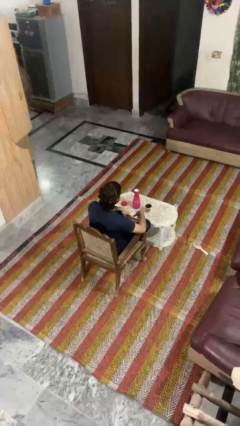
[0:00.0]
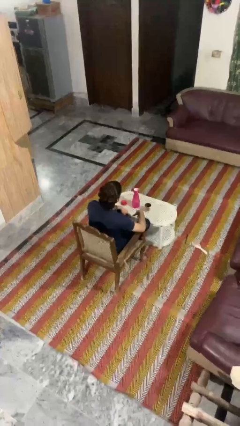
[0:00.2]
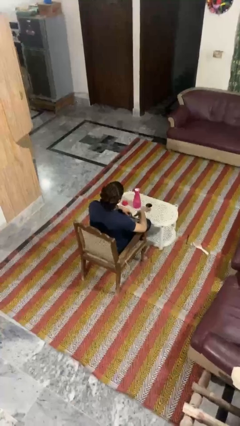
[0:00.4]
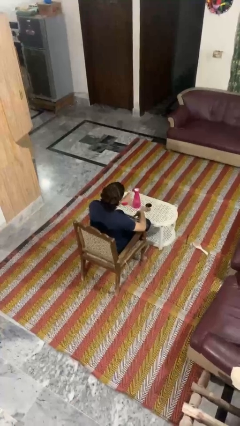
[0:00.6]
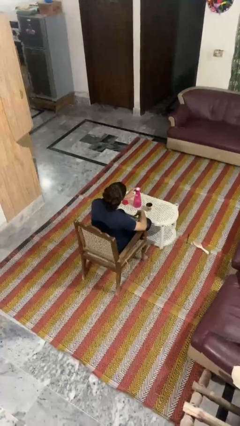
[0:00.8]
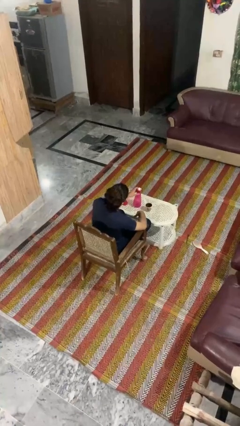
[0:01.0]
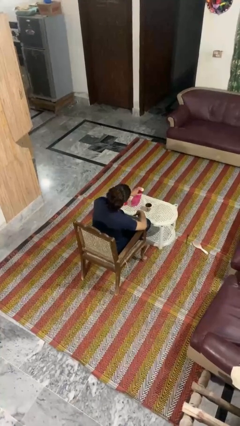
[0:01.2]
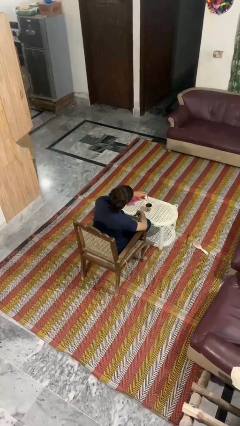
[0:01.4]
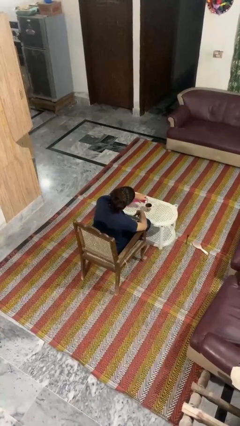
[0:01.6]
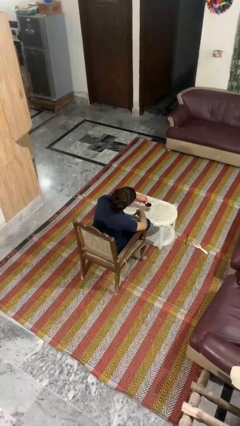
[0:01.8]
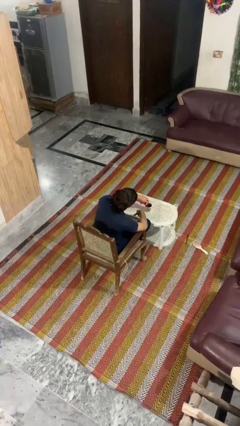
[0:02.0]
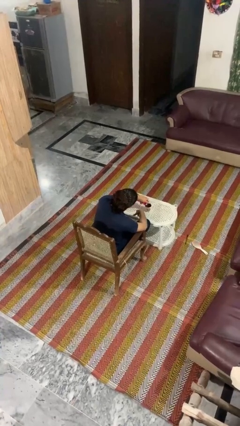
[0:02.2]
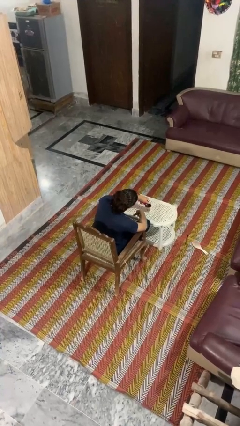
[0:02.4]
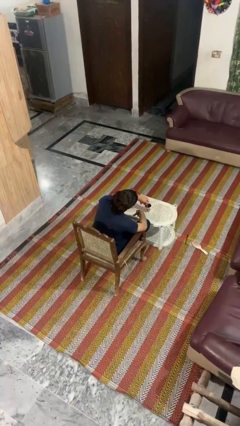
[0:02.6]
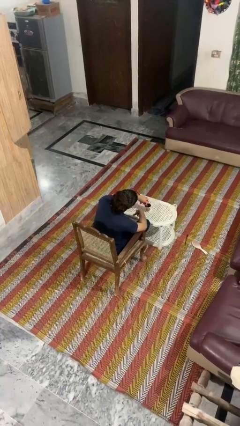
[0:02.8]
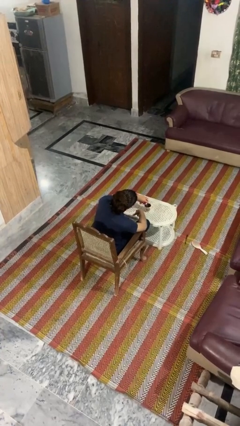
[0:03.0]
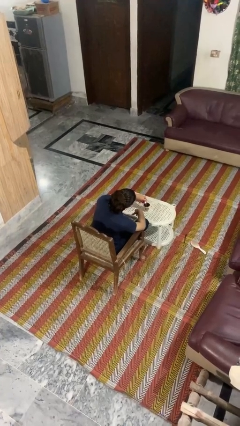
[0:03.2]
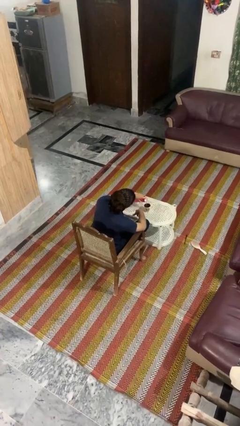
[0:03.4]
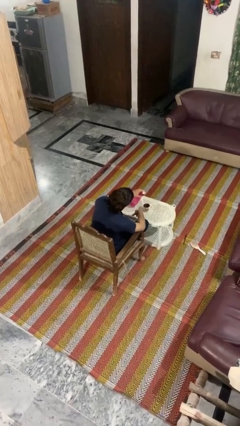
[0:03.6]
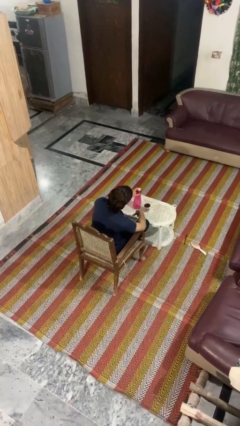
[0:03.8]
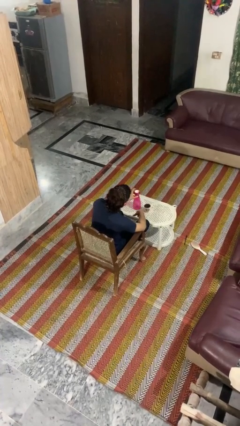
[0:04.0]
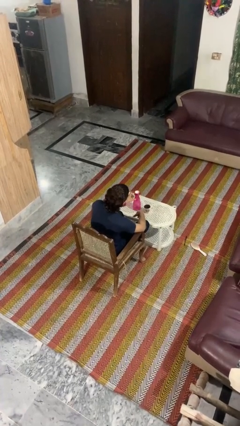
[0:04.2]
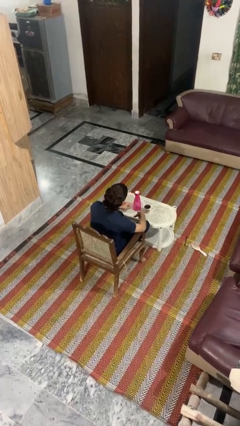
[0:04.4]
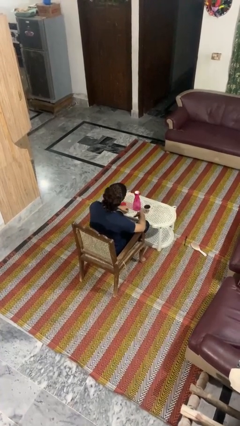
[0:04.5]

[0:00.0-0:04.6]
person pours liquid into cup

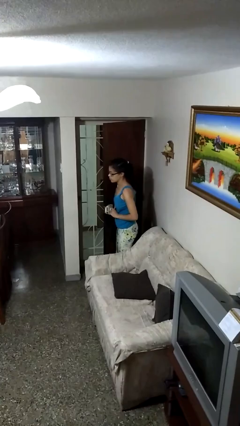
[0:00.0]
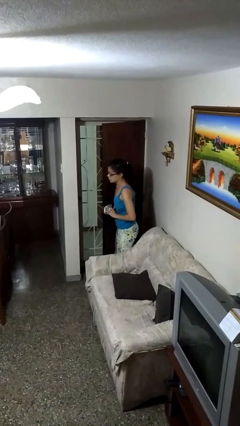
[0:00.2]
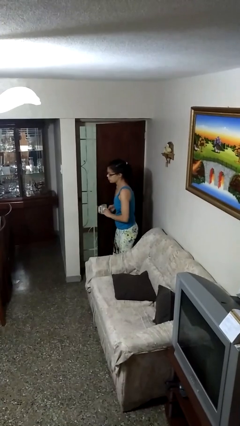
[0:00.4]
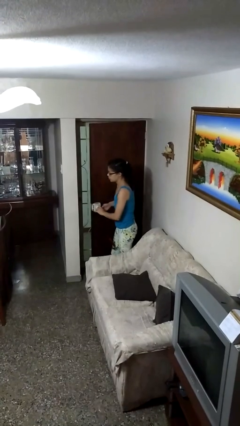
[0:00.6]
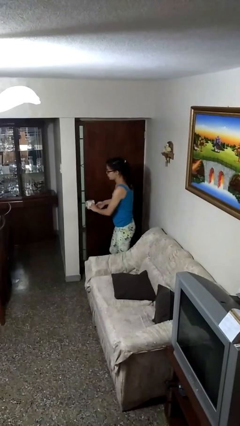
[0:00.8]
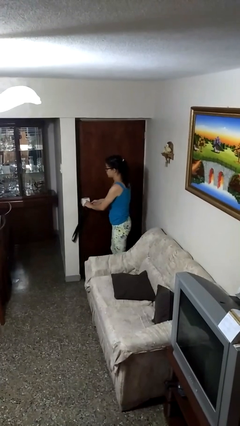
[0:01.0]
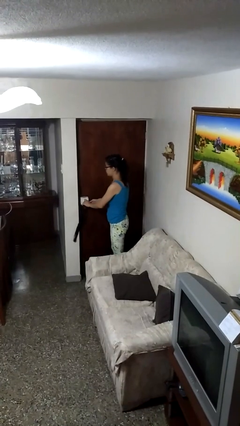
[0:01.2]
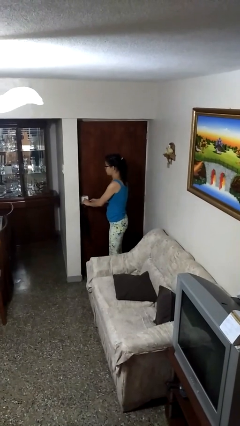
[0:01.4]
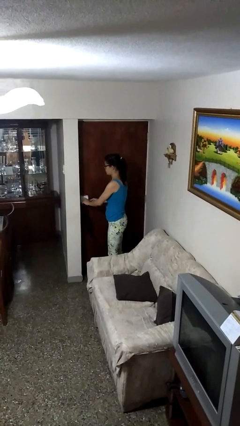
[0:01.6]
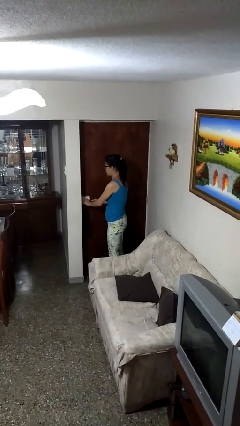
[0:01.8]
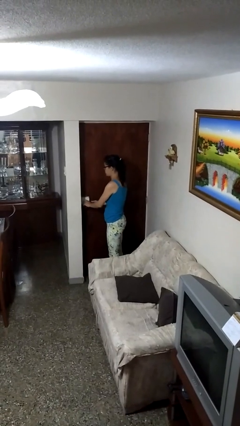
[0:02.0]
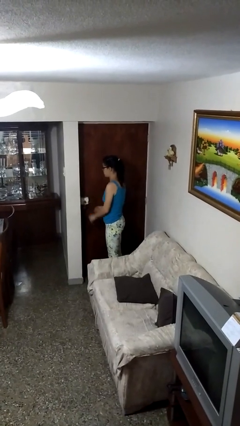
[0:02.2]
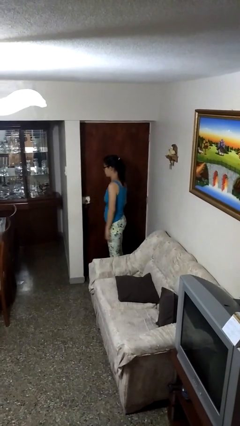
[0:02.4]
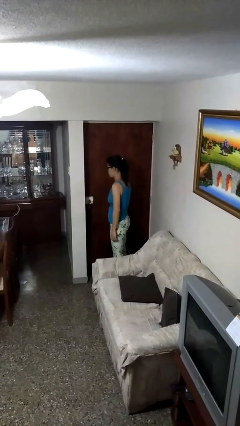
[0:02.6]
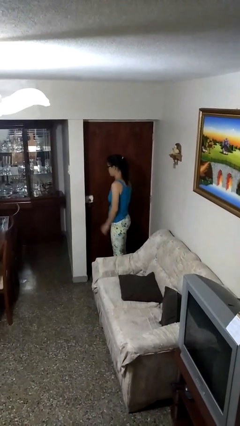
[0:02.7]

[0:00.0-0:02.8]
person closes facility door

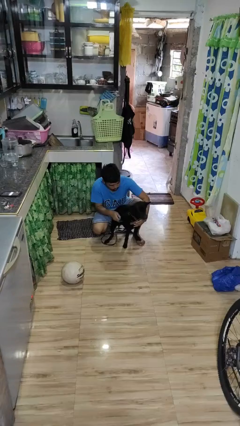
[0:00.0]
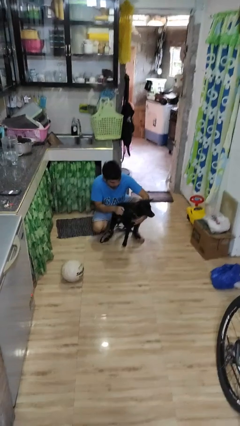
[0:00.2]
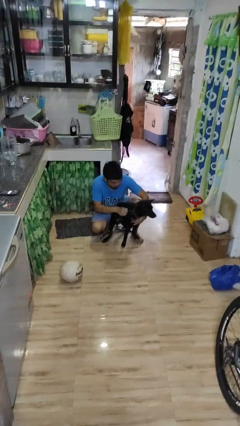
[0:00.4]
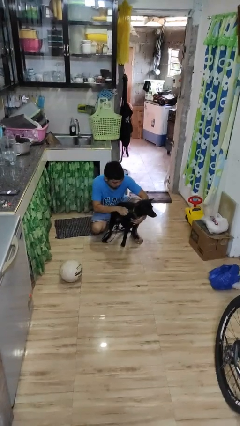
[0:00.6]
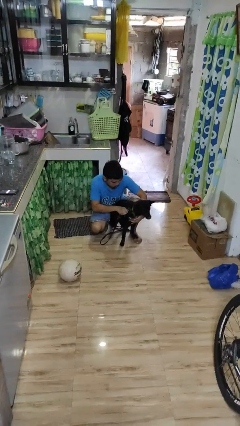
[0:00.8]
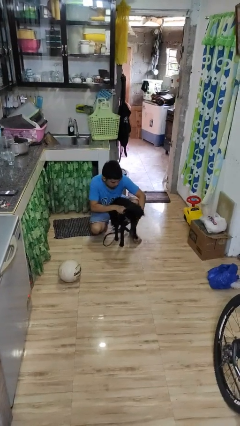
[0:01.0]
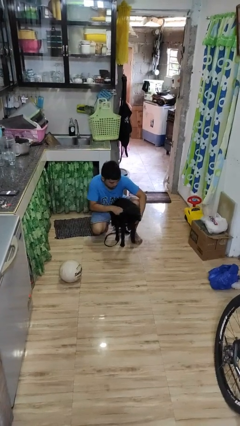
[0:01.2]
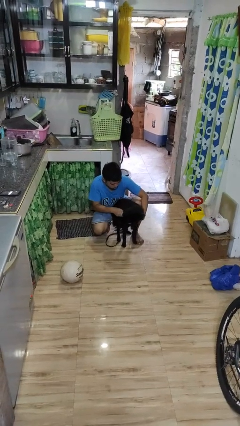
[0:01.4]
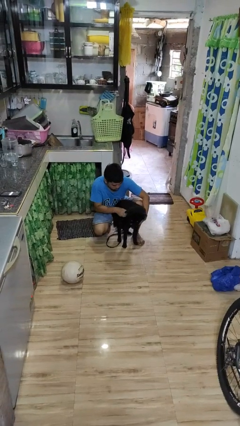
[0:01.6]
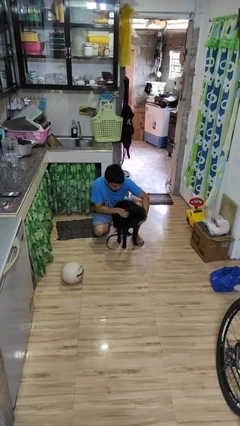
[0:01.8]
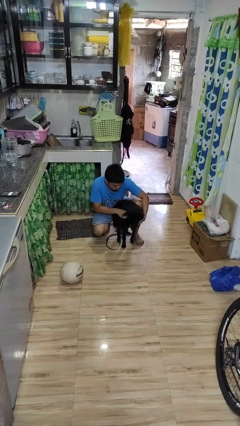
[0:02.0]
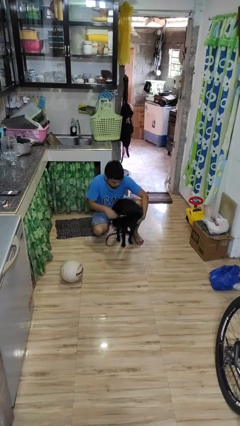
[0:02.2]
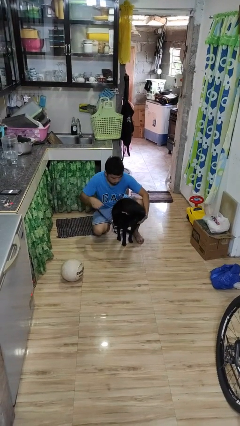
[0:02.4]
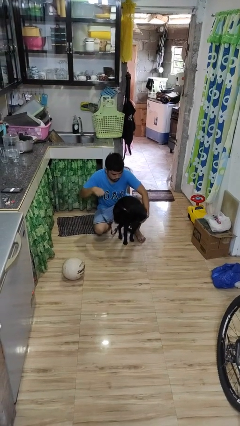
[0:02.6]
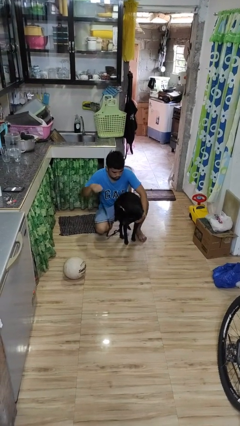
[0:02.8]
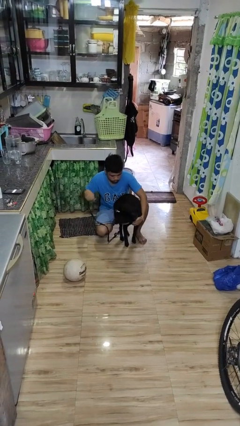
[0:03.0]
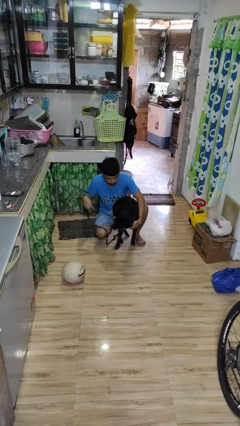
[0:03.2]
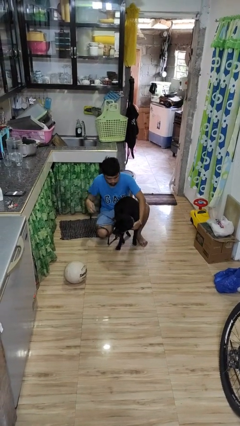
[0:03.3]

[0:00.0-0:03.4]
person attaches leash to dog

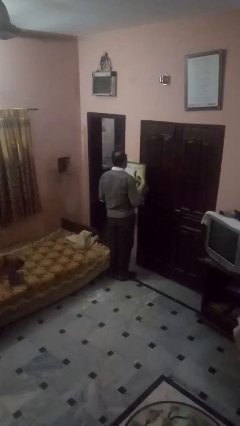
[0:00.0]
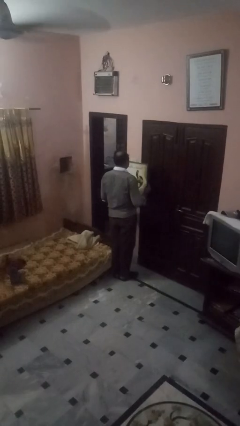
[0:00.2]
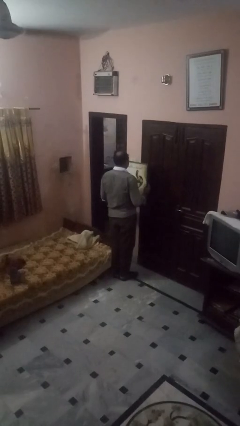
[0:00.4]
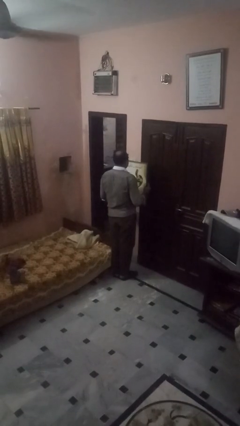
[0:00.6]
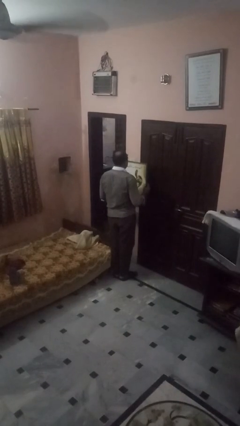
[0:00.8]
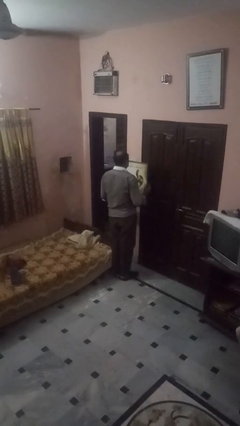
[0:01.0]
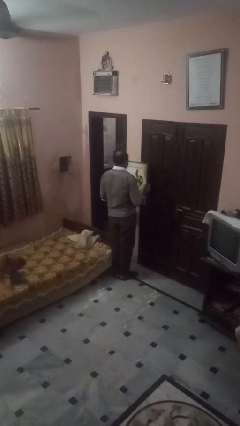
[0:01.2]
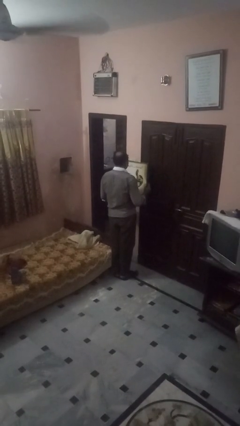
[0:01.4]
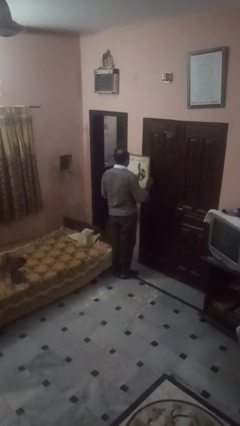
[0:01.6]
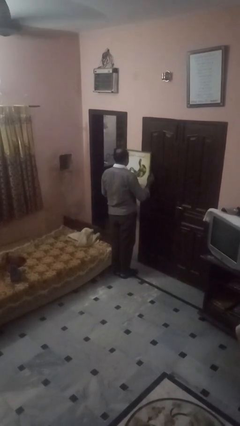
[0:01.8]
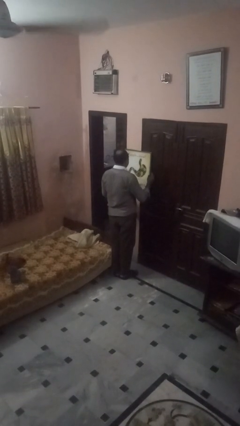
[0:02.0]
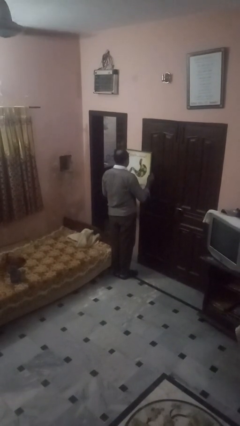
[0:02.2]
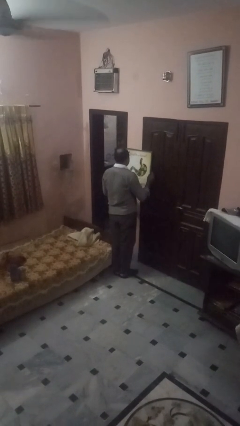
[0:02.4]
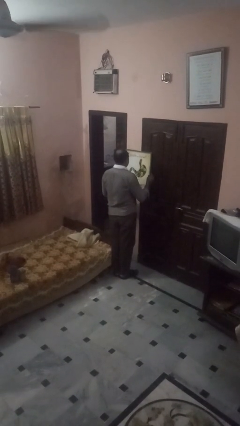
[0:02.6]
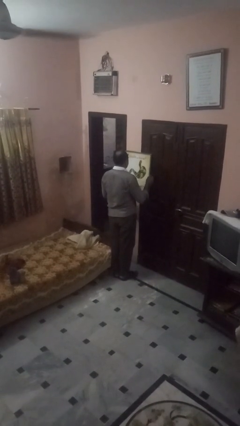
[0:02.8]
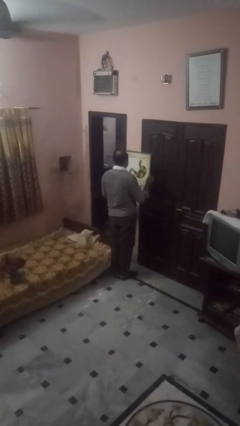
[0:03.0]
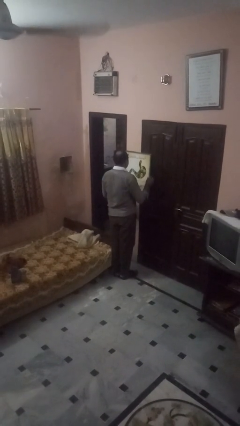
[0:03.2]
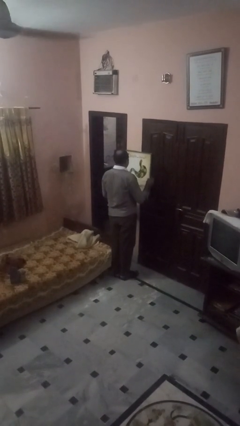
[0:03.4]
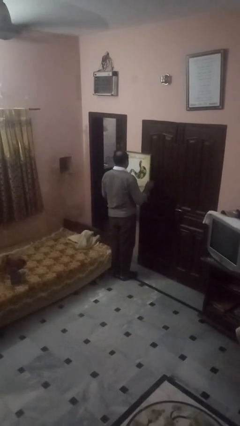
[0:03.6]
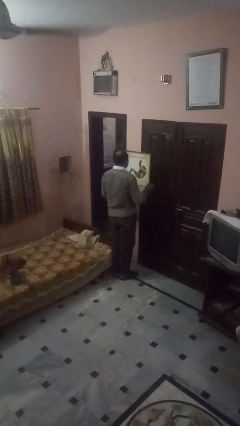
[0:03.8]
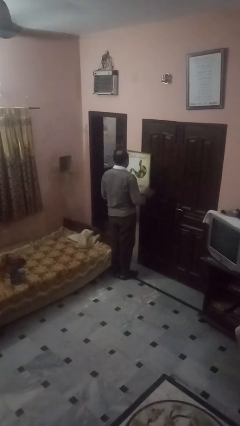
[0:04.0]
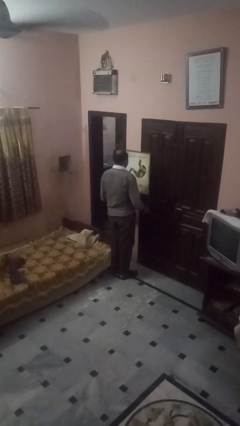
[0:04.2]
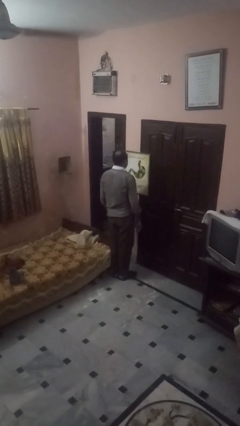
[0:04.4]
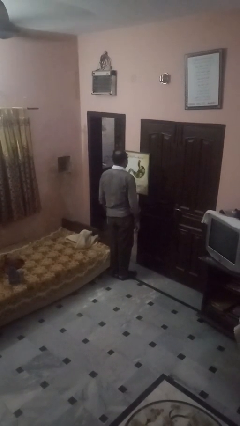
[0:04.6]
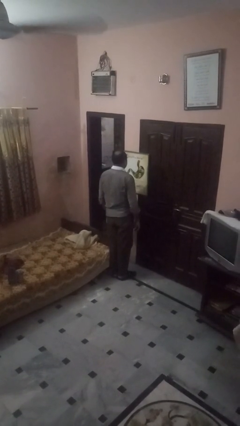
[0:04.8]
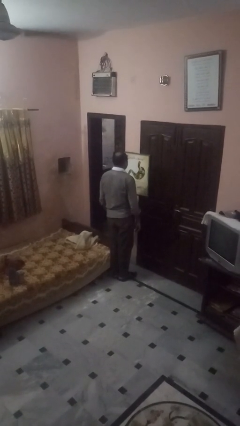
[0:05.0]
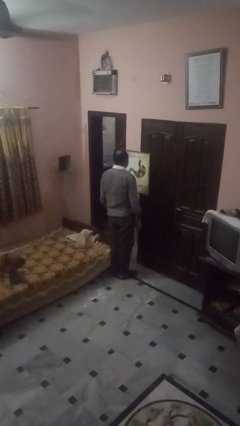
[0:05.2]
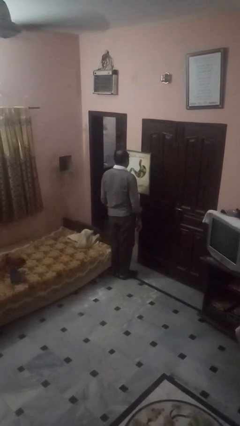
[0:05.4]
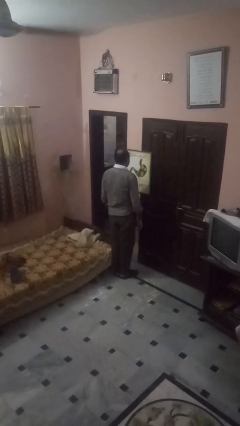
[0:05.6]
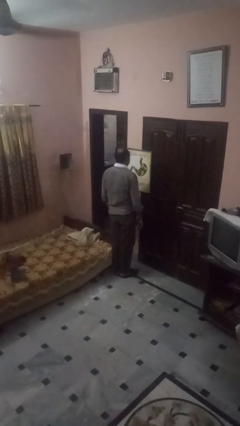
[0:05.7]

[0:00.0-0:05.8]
person puts up picture frame

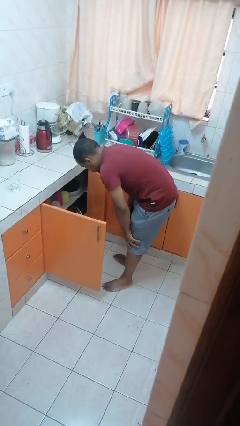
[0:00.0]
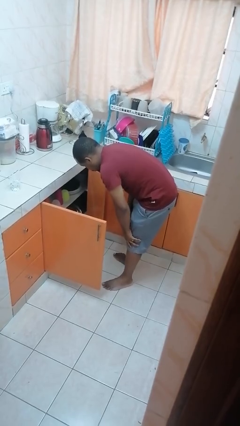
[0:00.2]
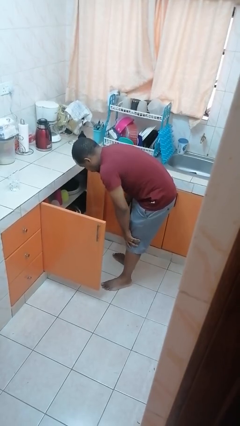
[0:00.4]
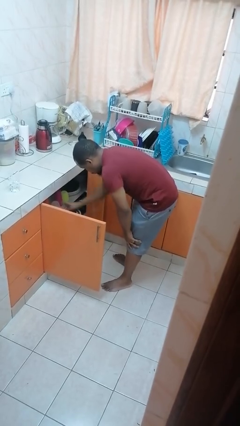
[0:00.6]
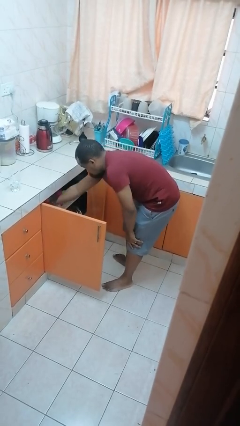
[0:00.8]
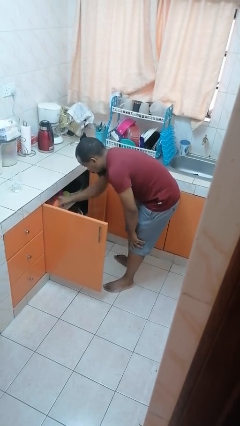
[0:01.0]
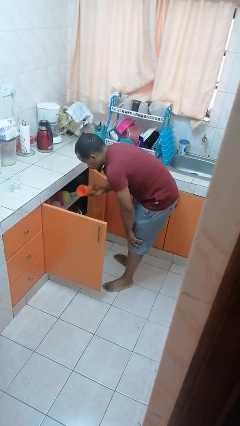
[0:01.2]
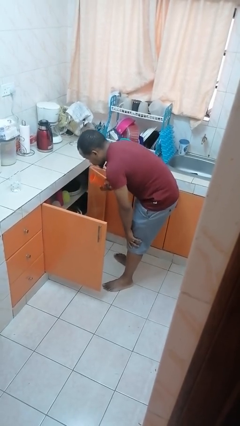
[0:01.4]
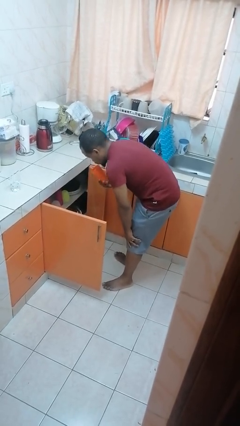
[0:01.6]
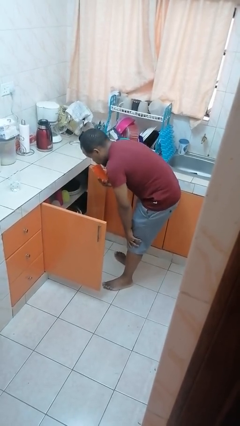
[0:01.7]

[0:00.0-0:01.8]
person takes object from cabinet
